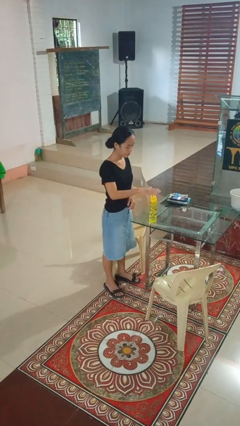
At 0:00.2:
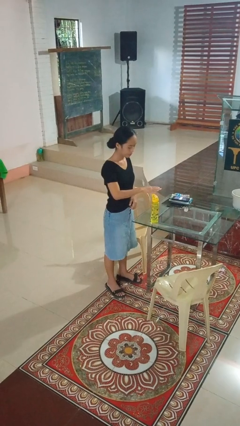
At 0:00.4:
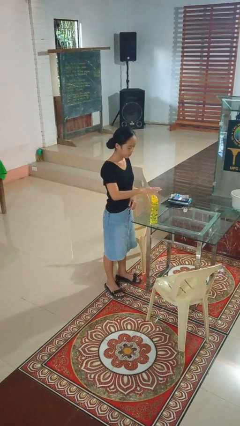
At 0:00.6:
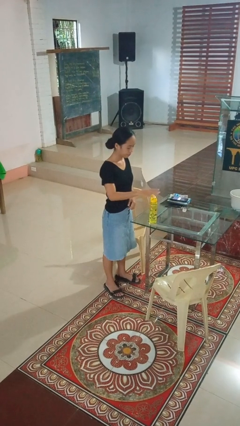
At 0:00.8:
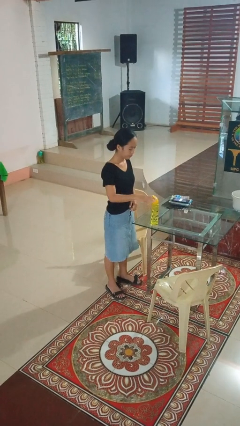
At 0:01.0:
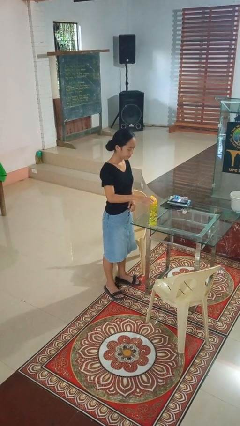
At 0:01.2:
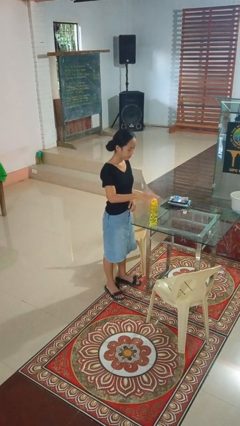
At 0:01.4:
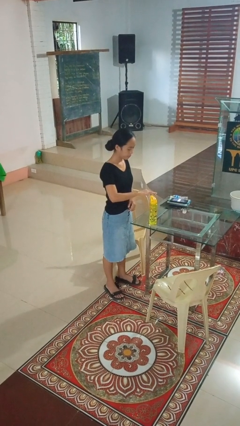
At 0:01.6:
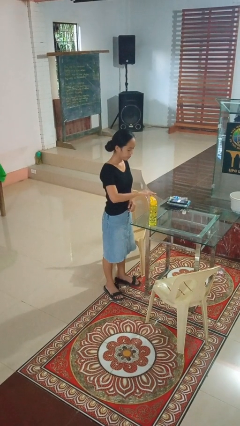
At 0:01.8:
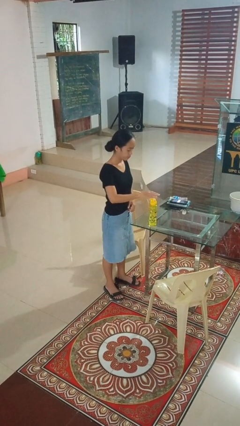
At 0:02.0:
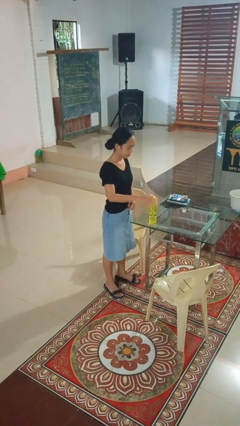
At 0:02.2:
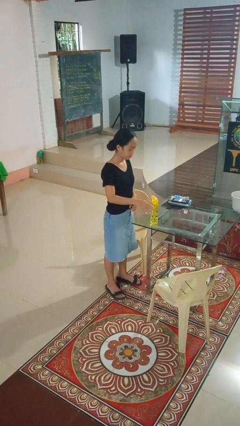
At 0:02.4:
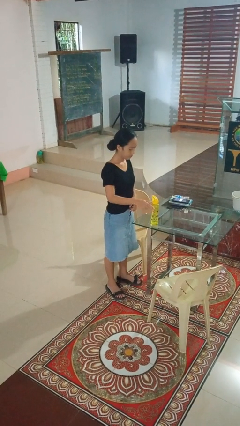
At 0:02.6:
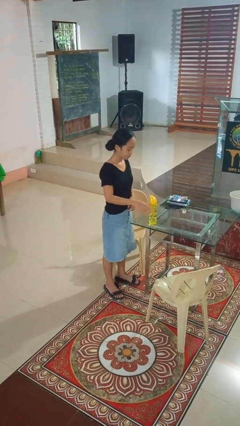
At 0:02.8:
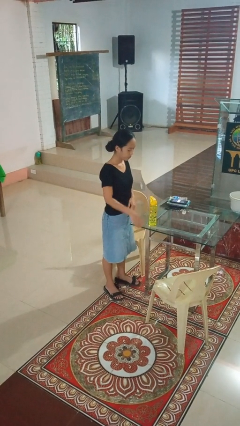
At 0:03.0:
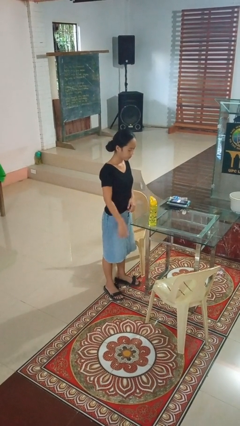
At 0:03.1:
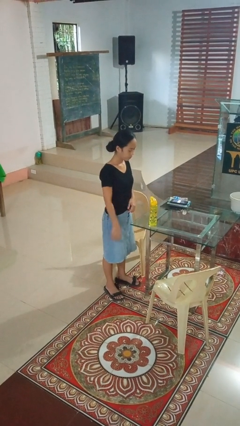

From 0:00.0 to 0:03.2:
person waves hand over object

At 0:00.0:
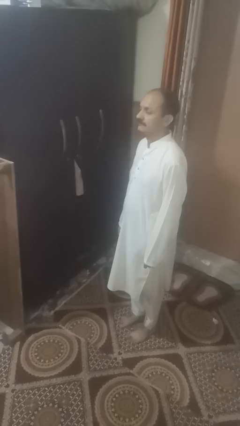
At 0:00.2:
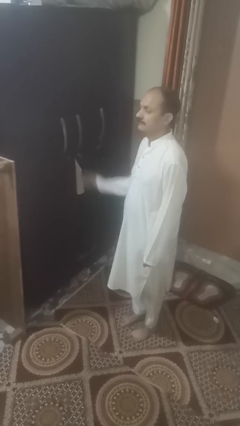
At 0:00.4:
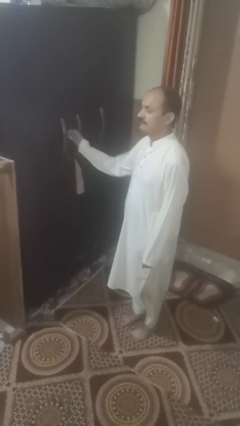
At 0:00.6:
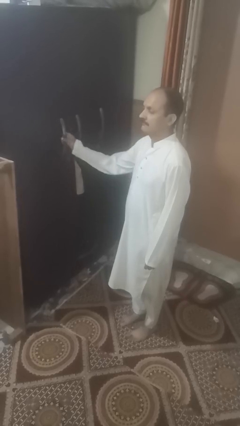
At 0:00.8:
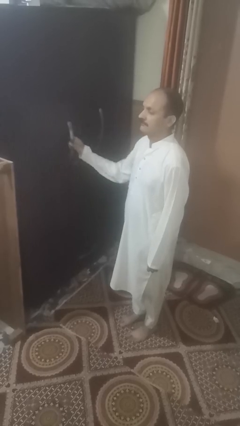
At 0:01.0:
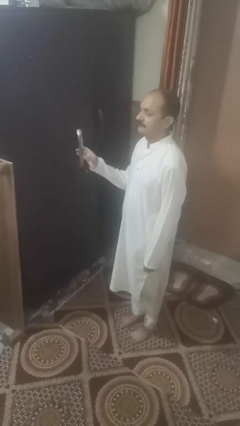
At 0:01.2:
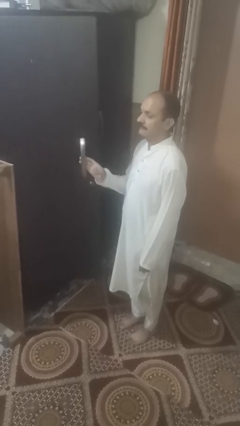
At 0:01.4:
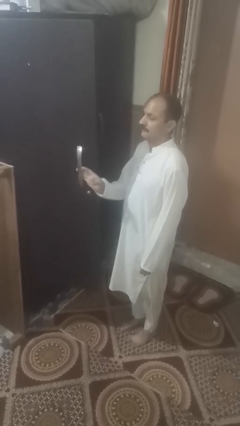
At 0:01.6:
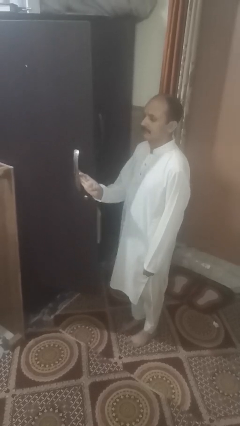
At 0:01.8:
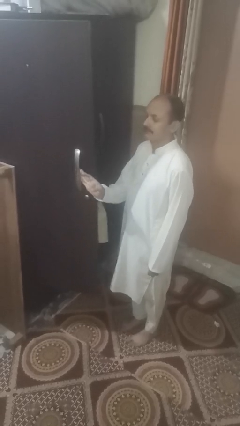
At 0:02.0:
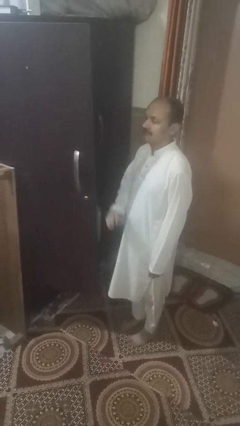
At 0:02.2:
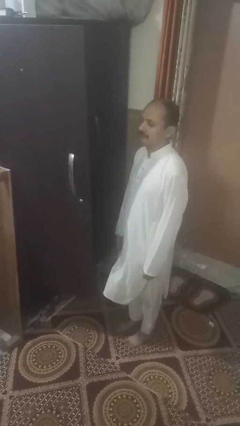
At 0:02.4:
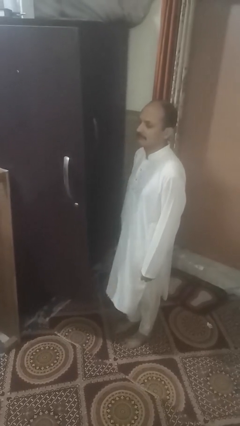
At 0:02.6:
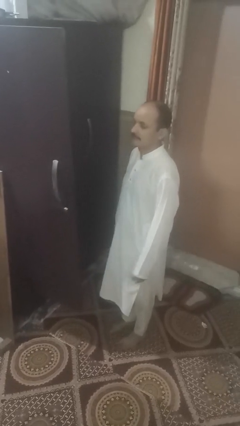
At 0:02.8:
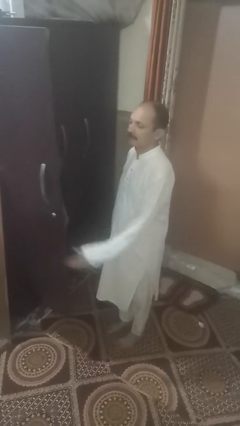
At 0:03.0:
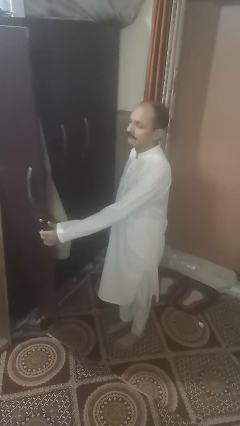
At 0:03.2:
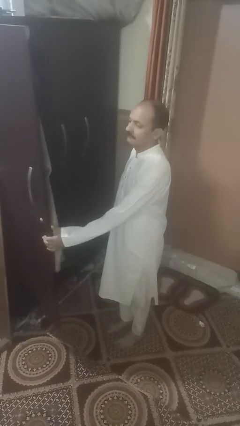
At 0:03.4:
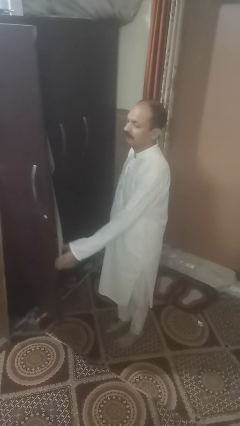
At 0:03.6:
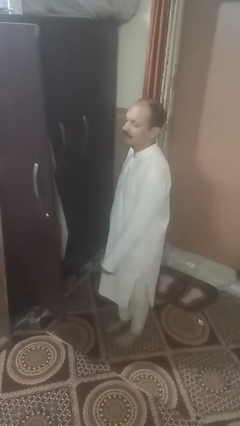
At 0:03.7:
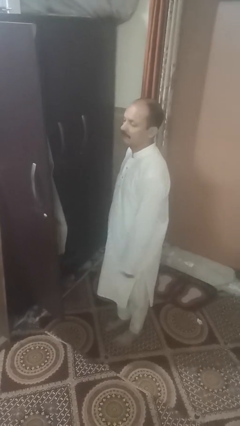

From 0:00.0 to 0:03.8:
person opens facility door

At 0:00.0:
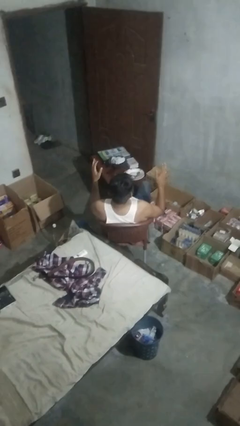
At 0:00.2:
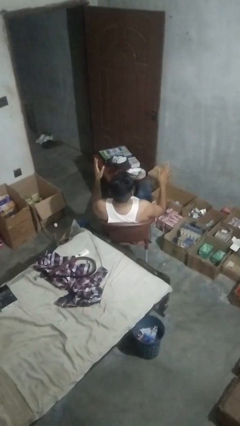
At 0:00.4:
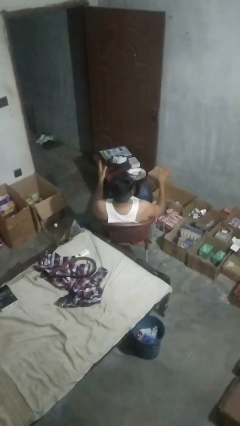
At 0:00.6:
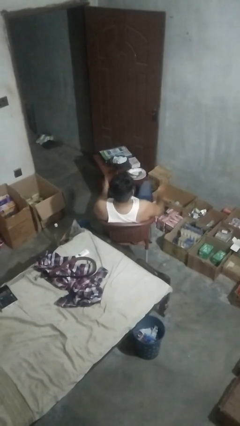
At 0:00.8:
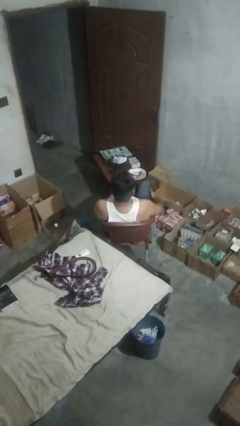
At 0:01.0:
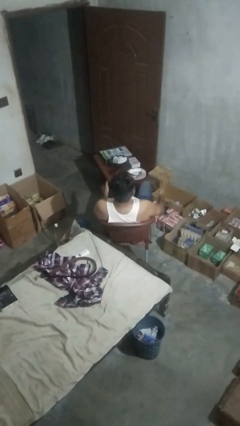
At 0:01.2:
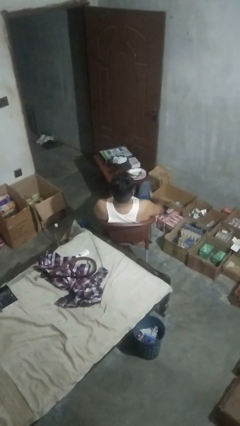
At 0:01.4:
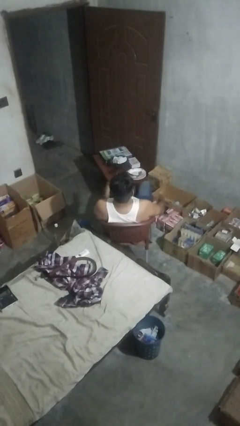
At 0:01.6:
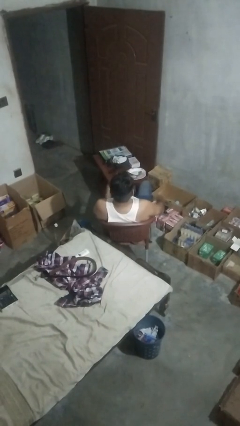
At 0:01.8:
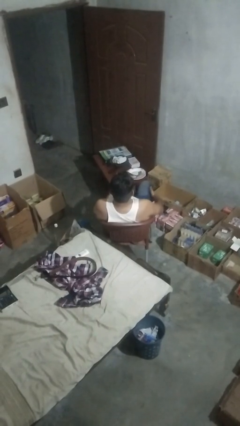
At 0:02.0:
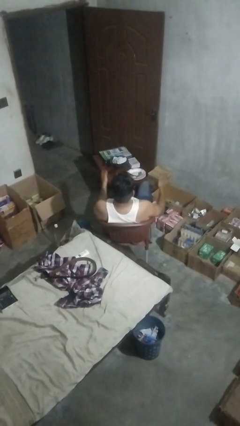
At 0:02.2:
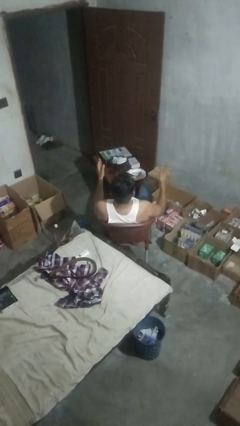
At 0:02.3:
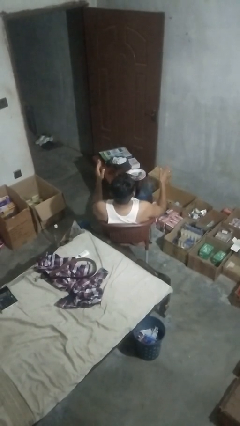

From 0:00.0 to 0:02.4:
person slaps hands on thighs

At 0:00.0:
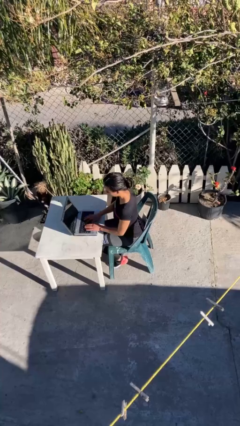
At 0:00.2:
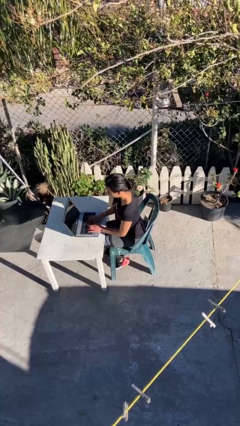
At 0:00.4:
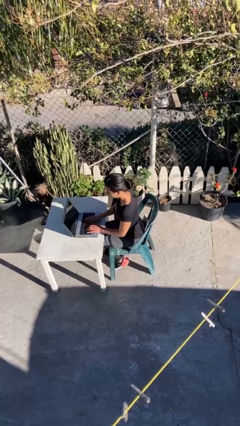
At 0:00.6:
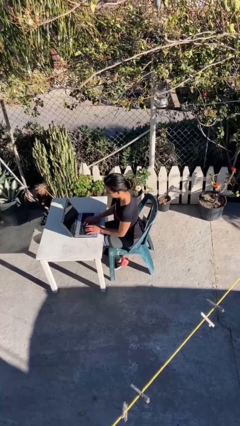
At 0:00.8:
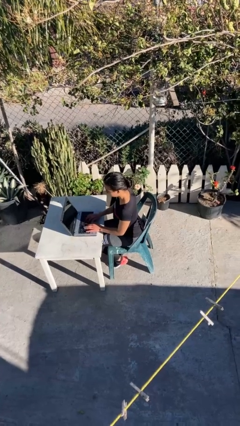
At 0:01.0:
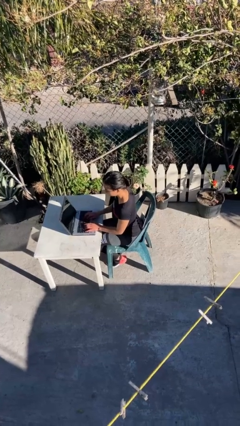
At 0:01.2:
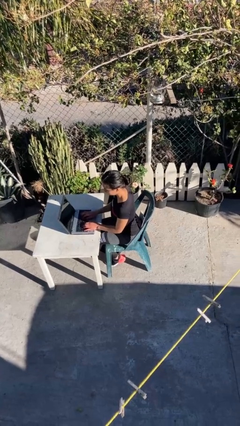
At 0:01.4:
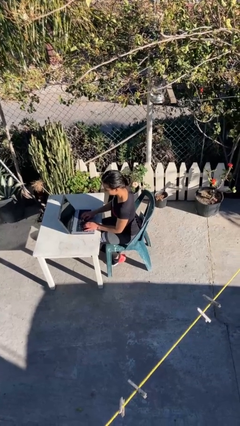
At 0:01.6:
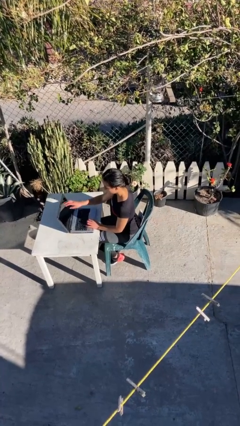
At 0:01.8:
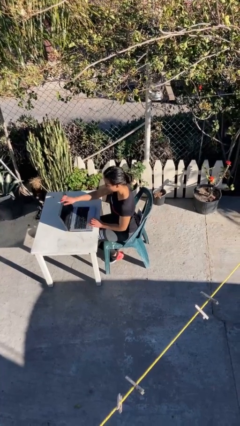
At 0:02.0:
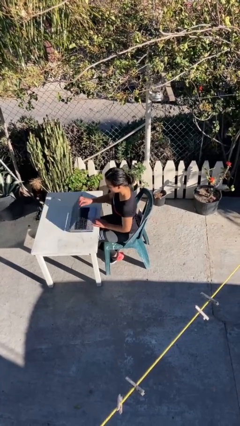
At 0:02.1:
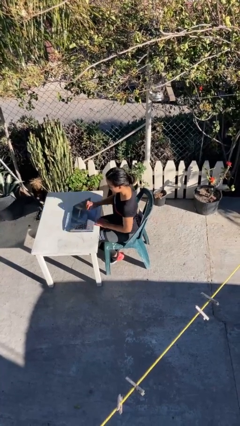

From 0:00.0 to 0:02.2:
person interacts with laptop

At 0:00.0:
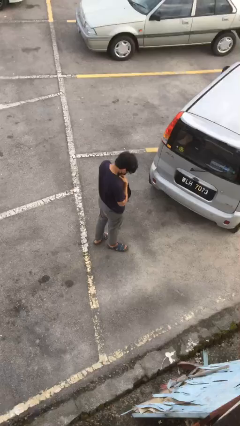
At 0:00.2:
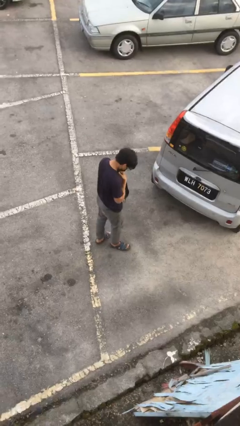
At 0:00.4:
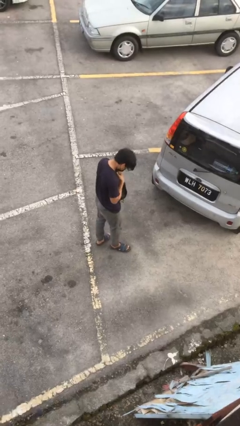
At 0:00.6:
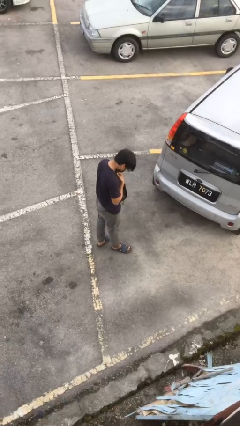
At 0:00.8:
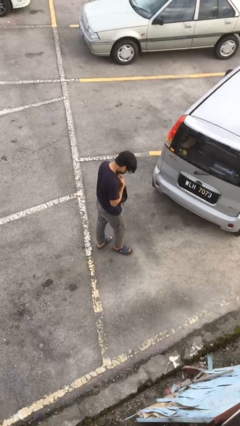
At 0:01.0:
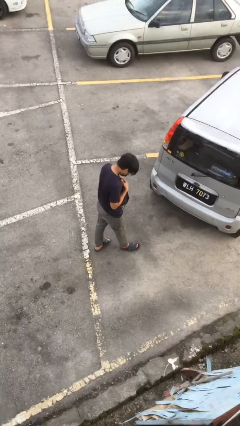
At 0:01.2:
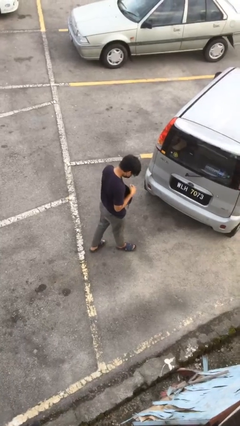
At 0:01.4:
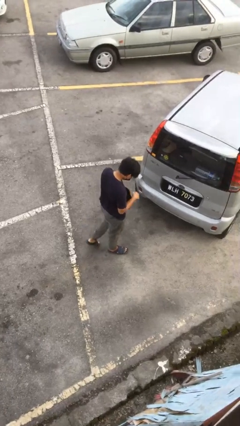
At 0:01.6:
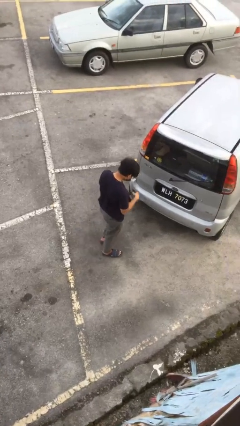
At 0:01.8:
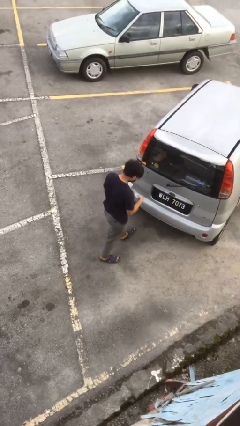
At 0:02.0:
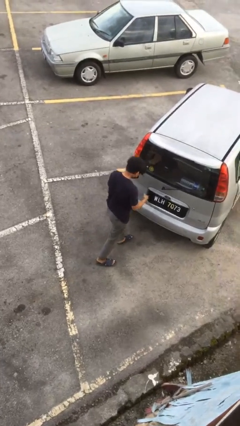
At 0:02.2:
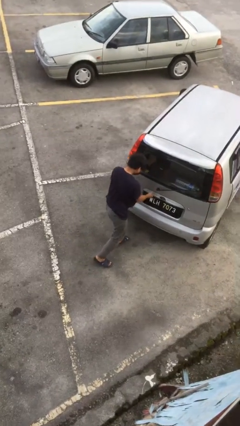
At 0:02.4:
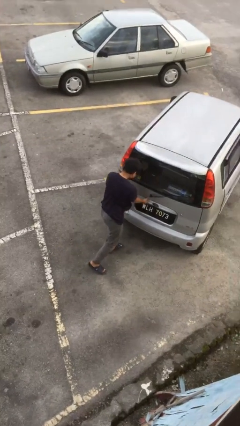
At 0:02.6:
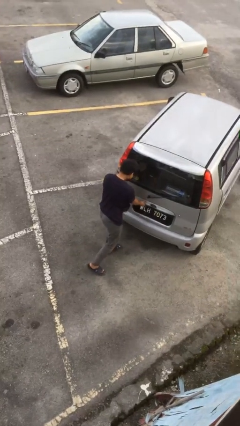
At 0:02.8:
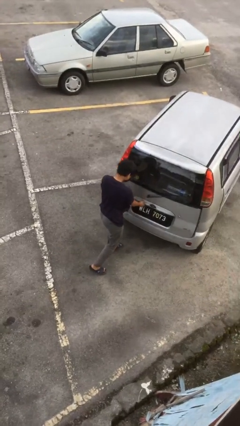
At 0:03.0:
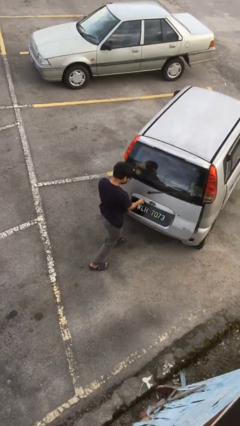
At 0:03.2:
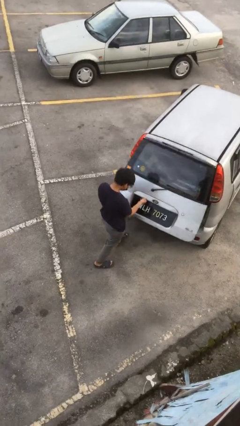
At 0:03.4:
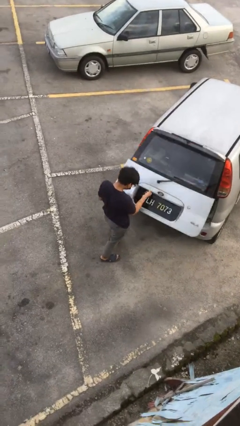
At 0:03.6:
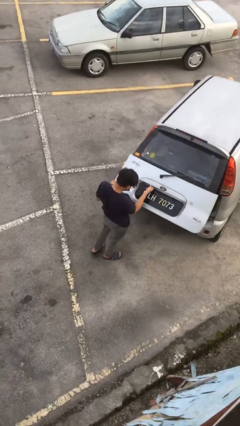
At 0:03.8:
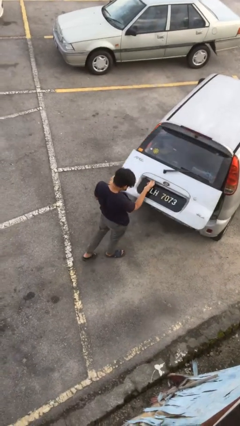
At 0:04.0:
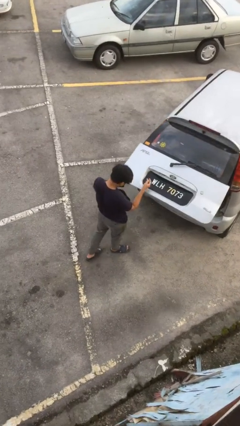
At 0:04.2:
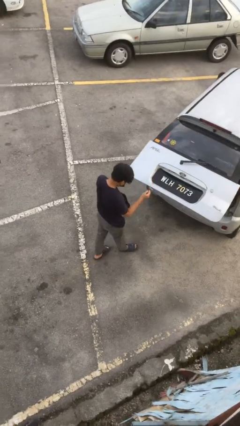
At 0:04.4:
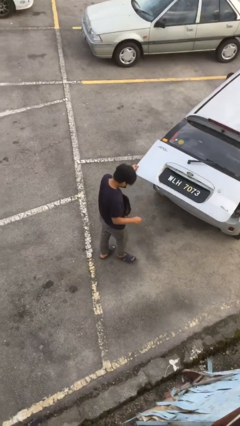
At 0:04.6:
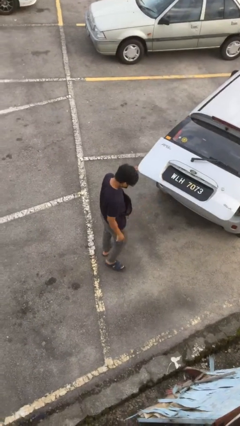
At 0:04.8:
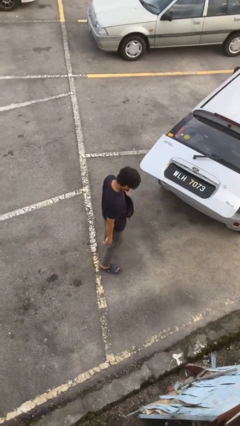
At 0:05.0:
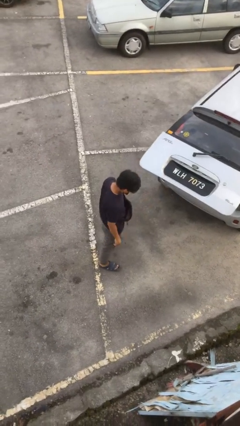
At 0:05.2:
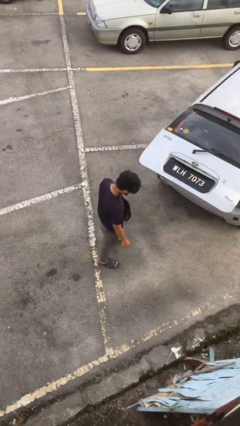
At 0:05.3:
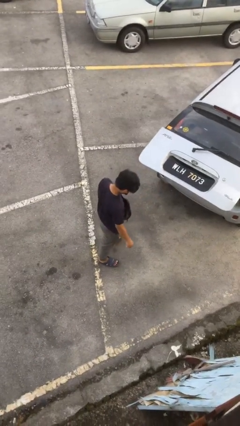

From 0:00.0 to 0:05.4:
person opens car trunk

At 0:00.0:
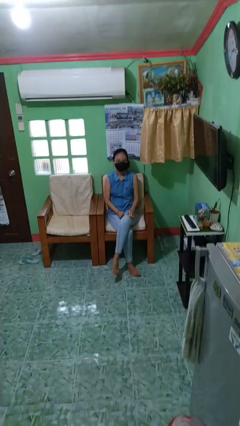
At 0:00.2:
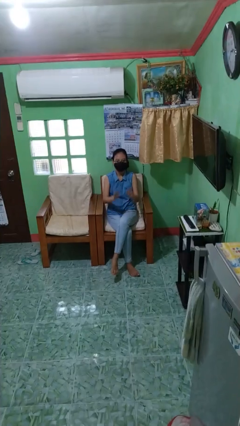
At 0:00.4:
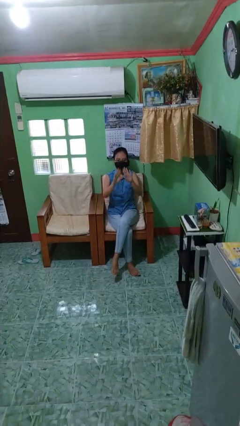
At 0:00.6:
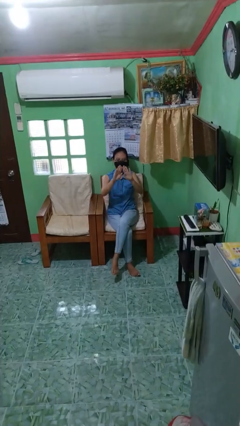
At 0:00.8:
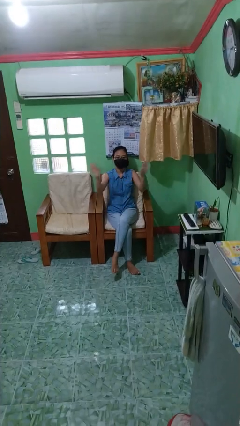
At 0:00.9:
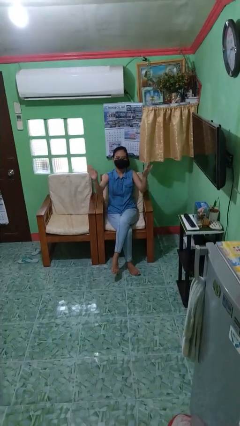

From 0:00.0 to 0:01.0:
person gestures zoom in
